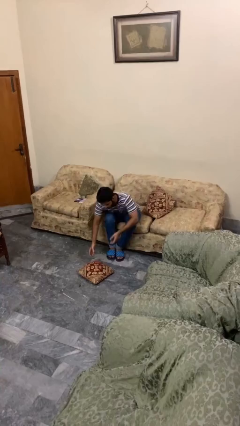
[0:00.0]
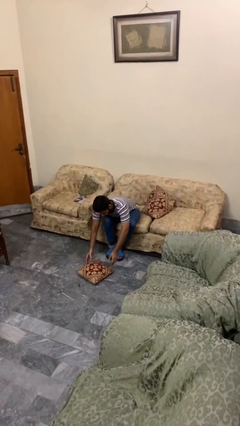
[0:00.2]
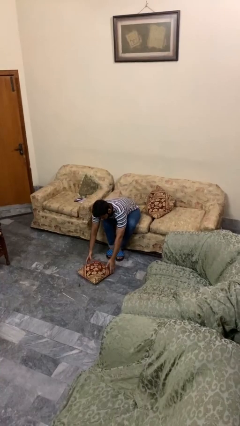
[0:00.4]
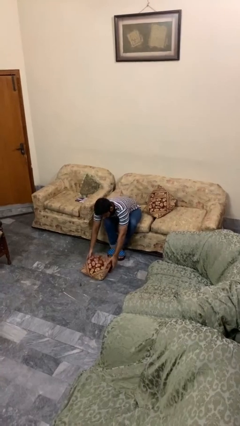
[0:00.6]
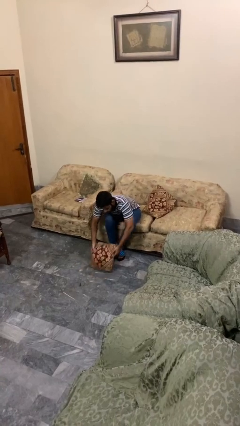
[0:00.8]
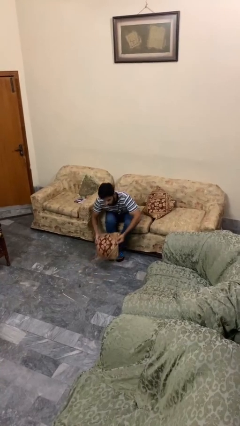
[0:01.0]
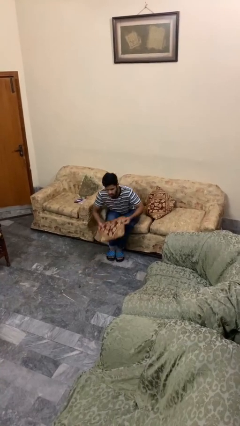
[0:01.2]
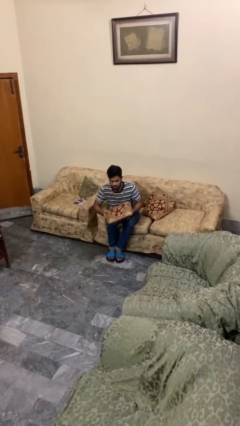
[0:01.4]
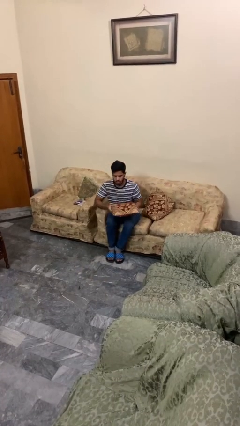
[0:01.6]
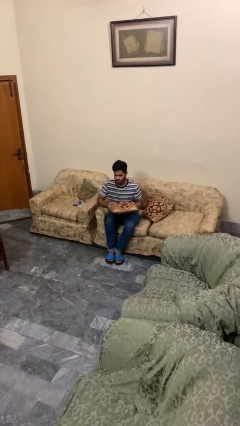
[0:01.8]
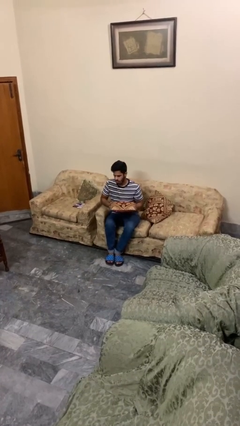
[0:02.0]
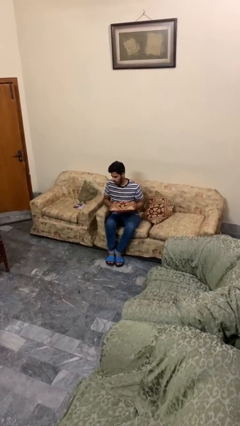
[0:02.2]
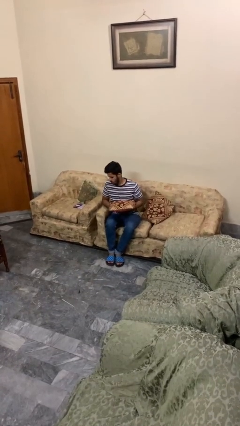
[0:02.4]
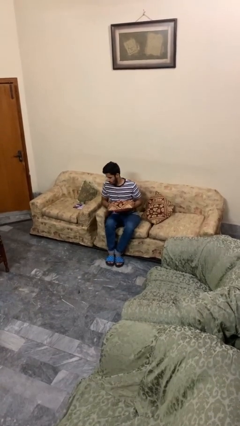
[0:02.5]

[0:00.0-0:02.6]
person picks up object from floor

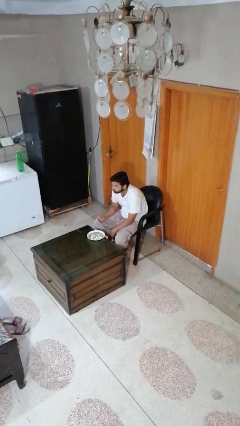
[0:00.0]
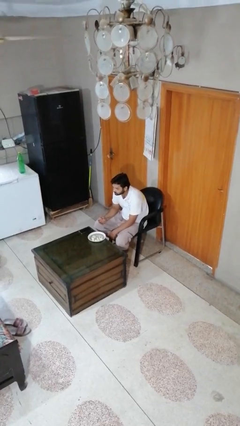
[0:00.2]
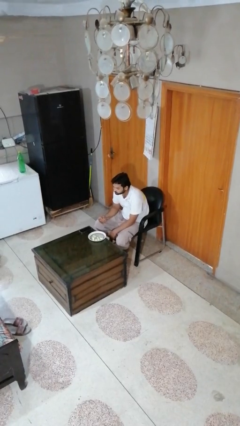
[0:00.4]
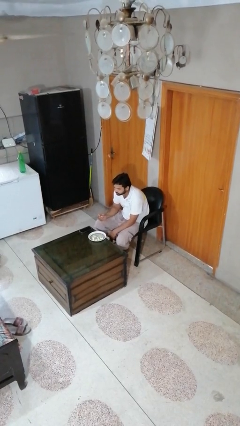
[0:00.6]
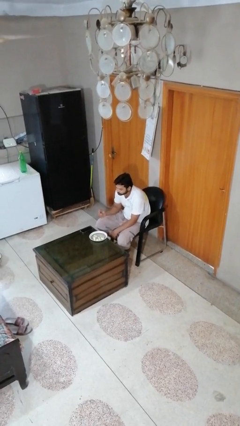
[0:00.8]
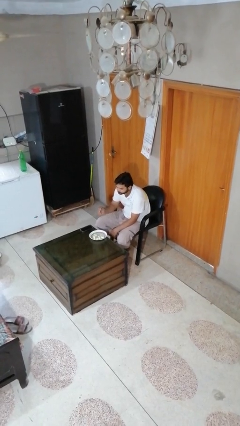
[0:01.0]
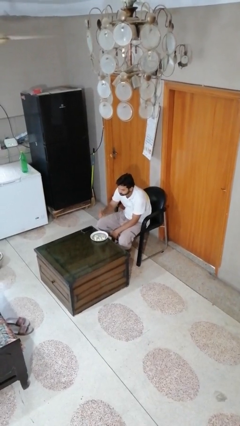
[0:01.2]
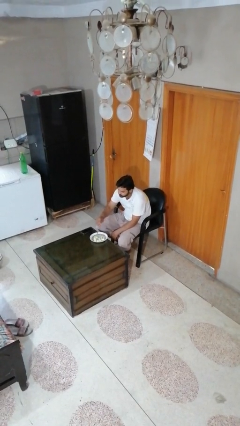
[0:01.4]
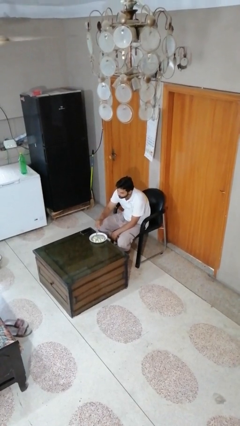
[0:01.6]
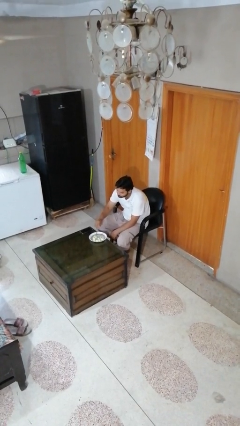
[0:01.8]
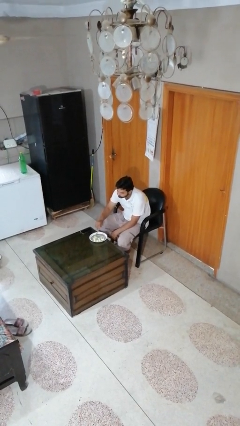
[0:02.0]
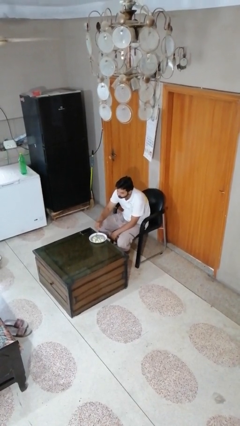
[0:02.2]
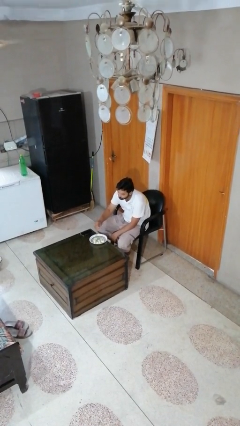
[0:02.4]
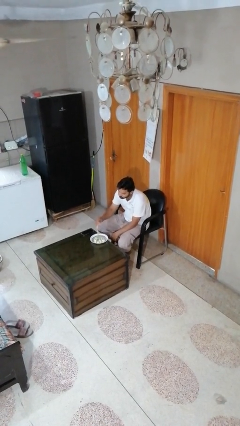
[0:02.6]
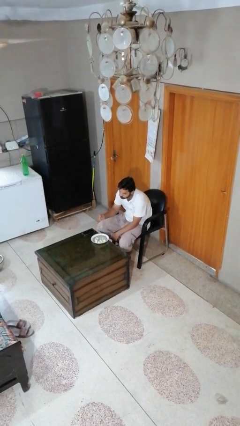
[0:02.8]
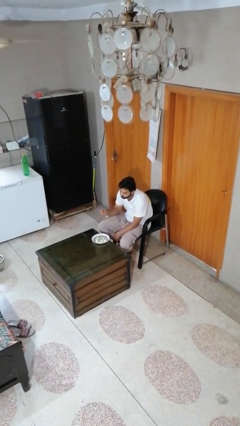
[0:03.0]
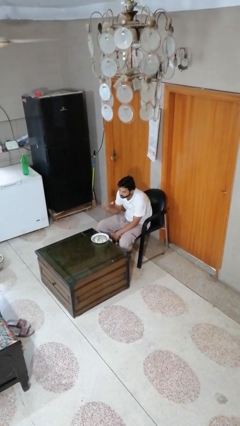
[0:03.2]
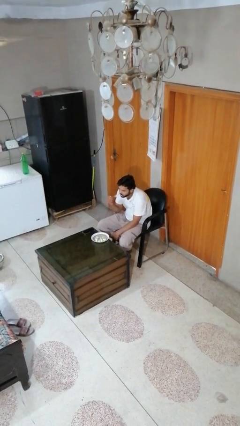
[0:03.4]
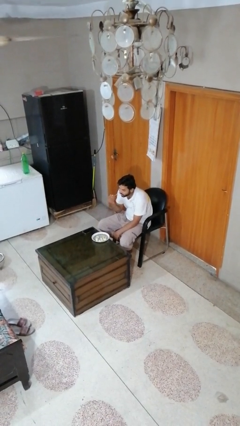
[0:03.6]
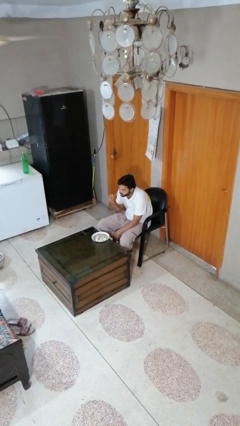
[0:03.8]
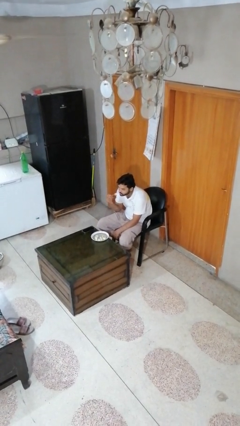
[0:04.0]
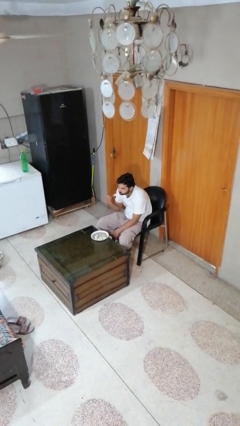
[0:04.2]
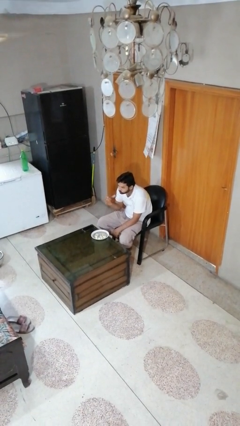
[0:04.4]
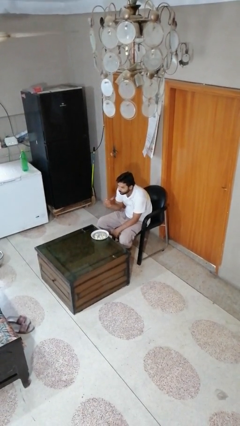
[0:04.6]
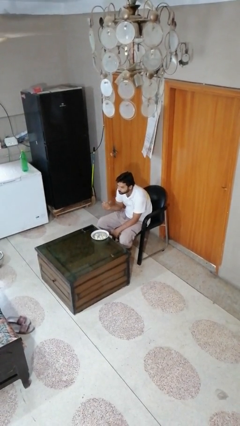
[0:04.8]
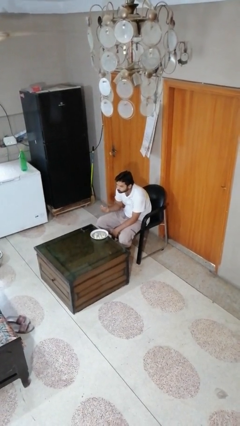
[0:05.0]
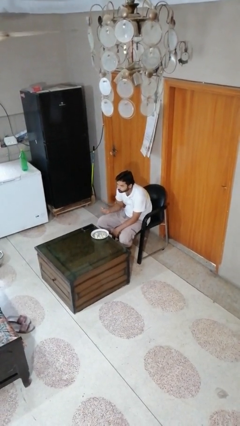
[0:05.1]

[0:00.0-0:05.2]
person eats with utensil

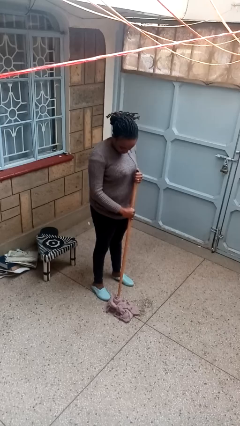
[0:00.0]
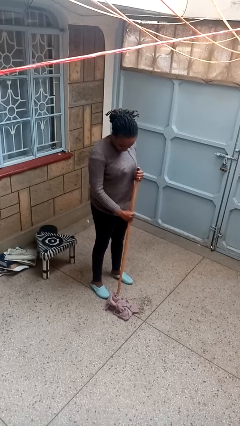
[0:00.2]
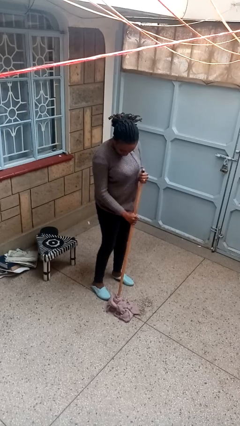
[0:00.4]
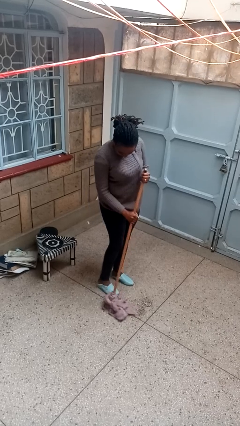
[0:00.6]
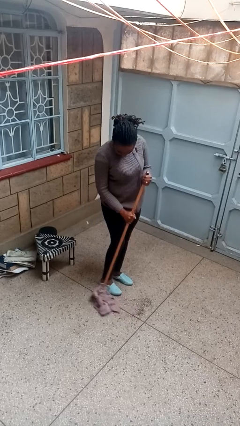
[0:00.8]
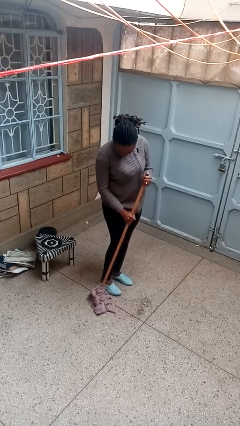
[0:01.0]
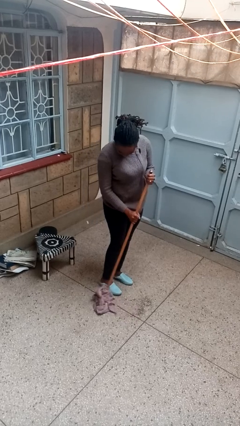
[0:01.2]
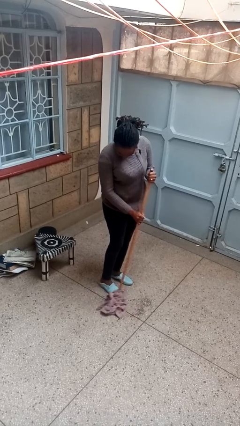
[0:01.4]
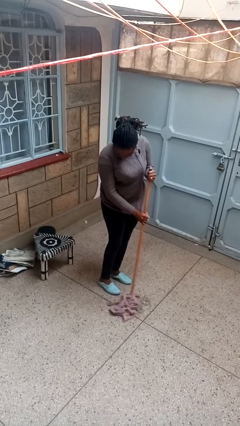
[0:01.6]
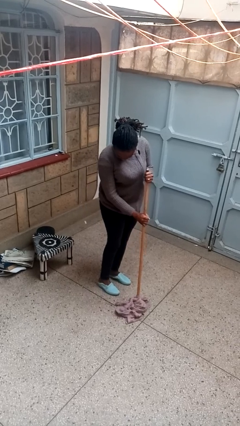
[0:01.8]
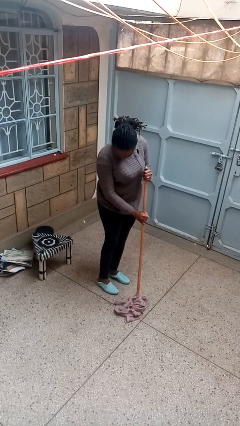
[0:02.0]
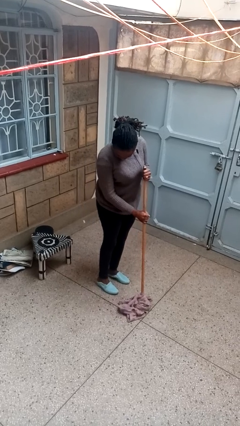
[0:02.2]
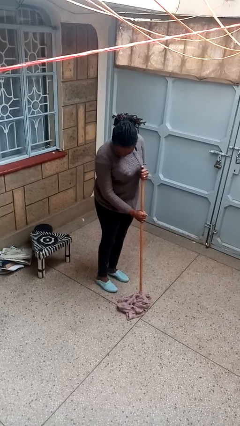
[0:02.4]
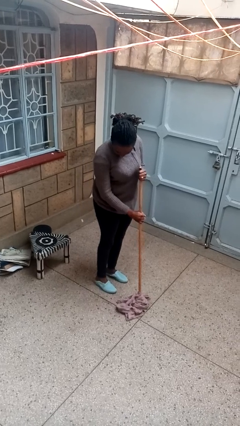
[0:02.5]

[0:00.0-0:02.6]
person mops

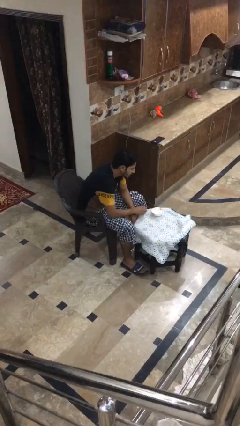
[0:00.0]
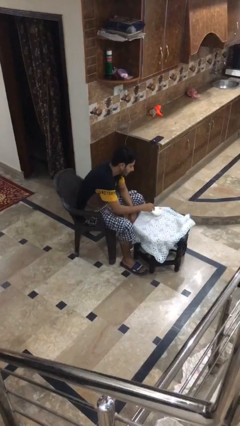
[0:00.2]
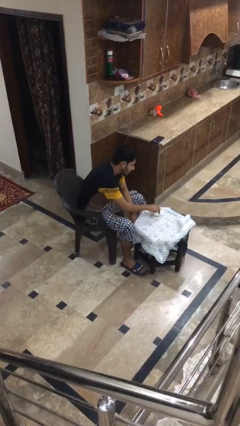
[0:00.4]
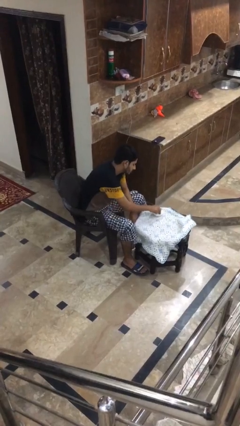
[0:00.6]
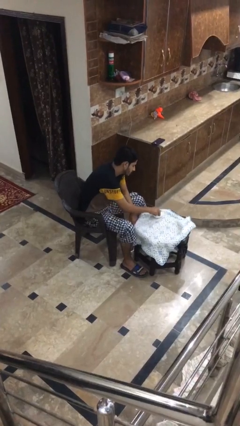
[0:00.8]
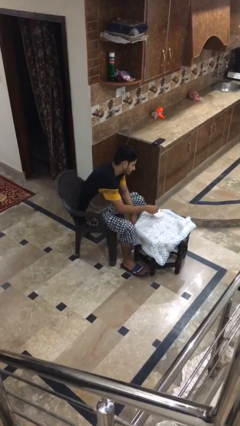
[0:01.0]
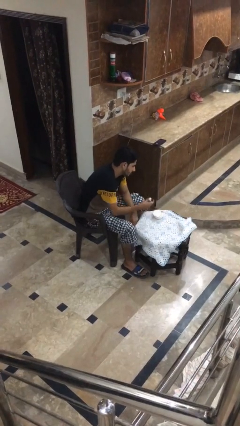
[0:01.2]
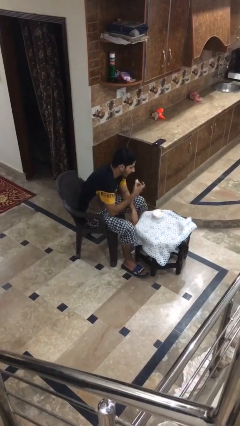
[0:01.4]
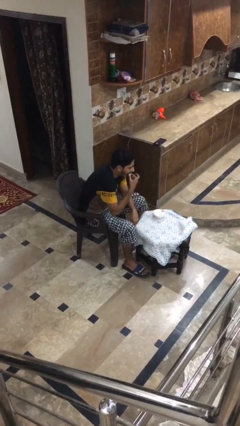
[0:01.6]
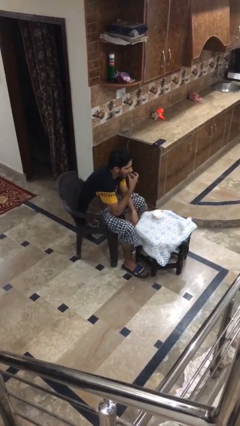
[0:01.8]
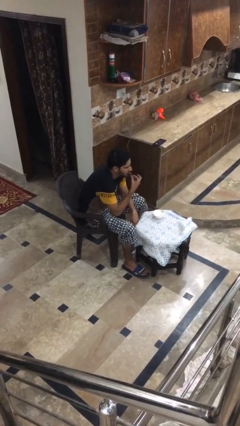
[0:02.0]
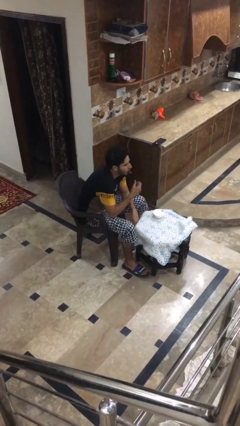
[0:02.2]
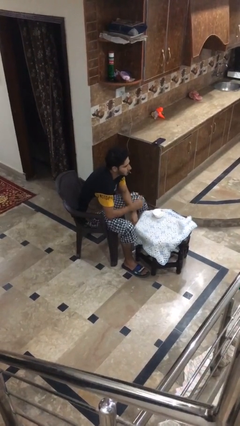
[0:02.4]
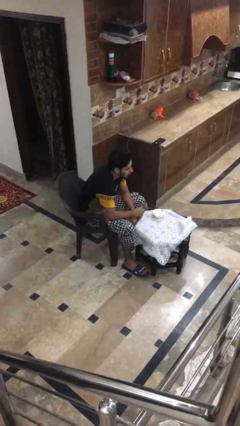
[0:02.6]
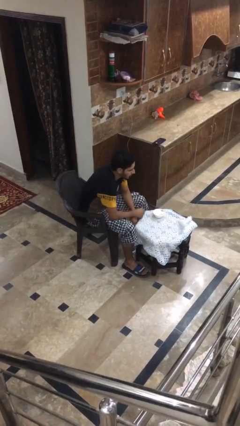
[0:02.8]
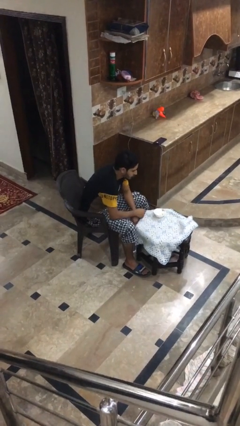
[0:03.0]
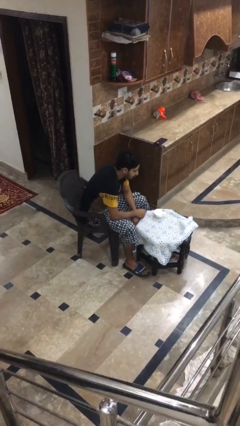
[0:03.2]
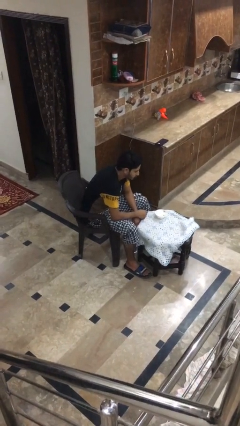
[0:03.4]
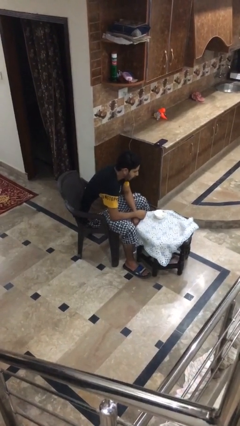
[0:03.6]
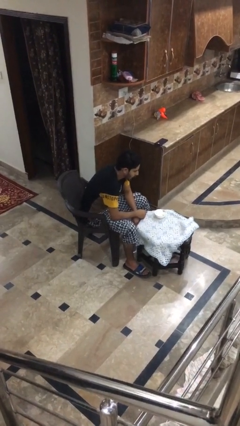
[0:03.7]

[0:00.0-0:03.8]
person eats with hands

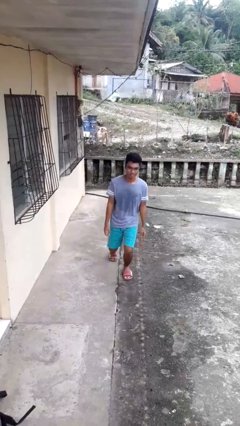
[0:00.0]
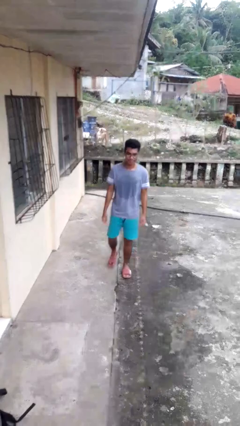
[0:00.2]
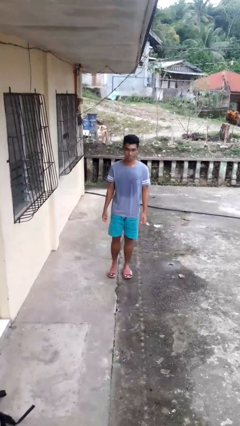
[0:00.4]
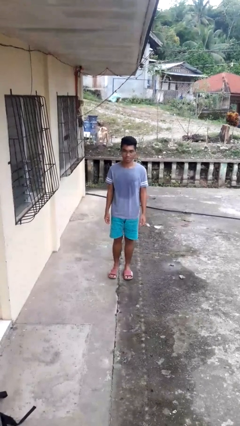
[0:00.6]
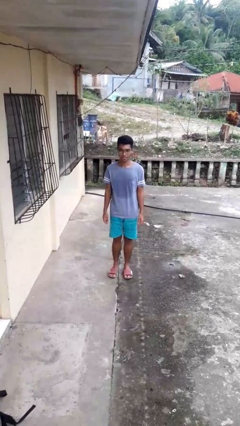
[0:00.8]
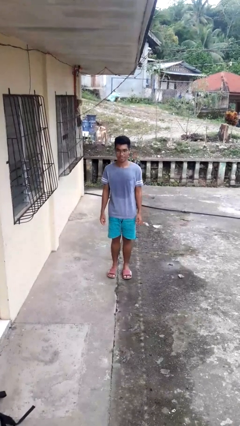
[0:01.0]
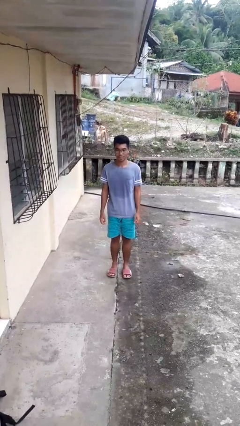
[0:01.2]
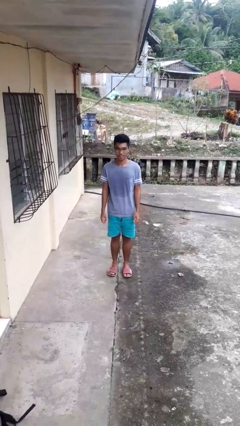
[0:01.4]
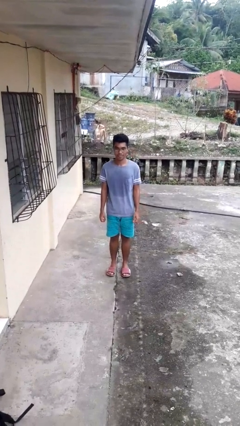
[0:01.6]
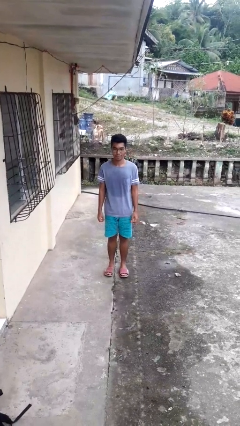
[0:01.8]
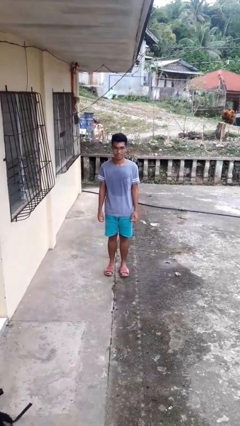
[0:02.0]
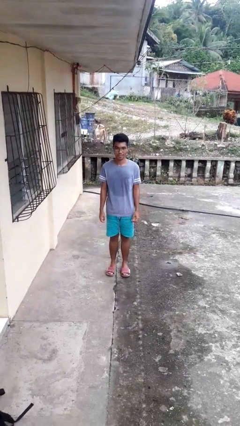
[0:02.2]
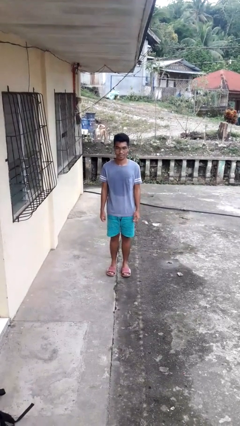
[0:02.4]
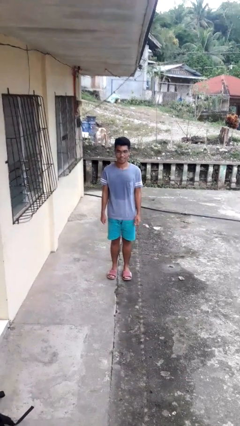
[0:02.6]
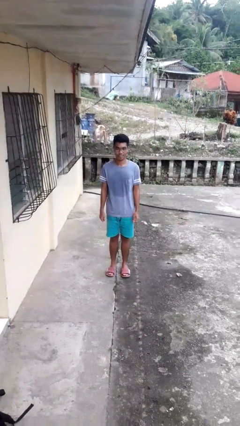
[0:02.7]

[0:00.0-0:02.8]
person stands up from floor

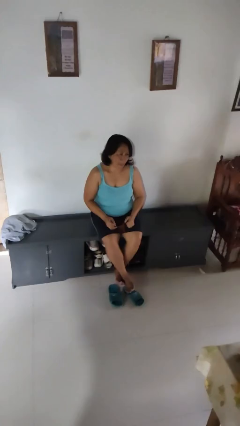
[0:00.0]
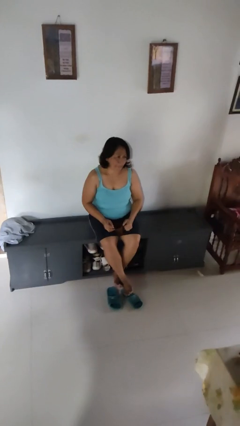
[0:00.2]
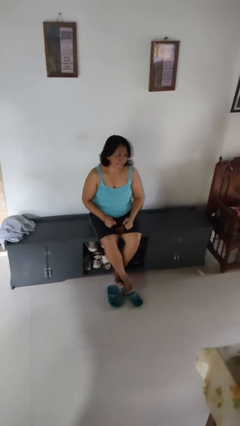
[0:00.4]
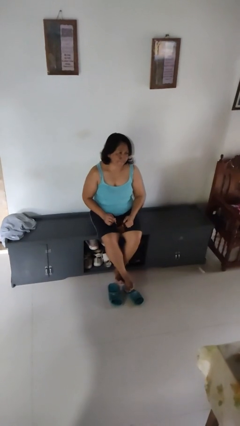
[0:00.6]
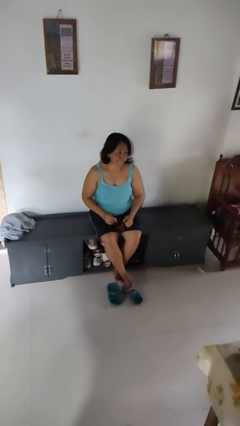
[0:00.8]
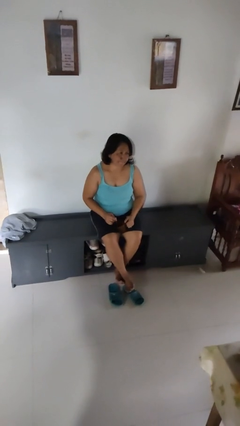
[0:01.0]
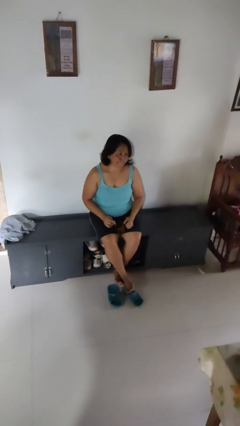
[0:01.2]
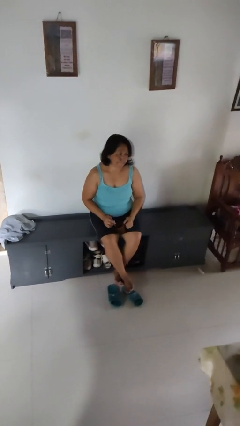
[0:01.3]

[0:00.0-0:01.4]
person stirs mug
